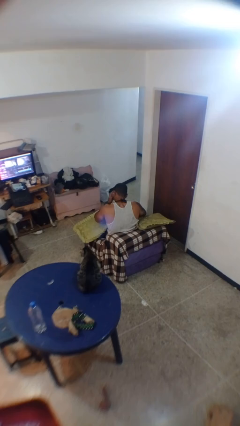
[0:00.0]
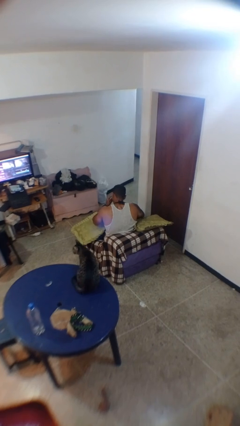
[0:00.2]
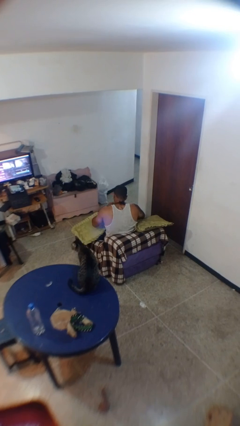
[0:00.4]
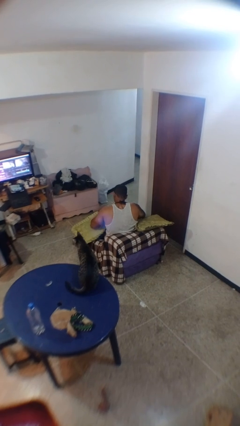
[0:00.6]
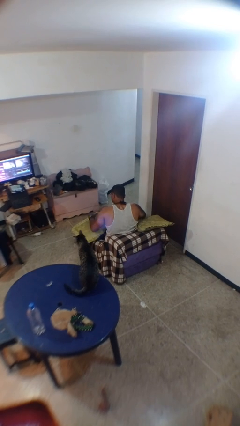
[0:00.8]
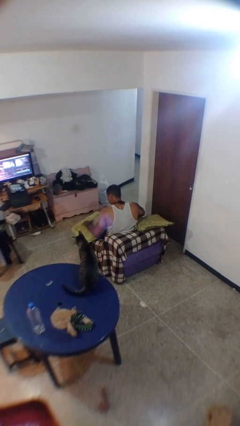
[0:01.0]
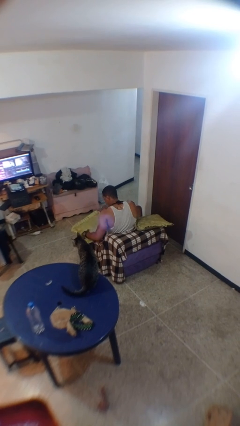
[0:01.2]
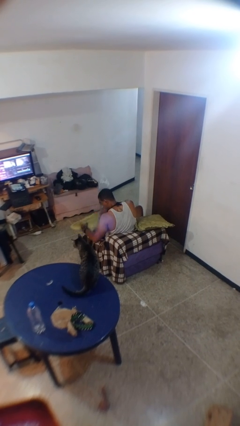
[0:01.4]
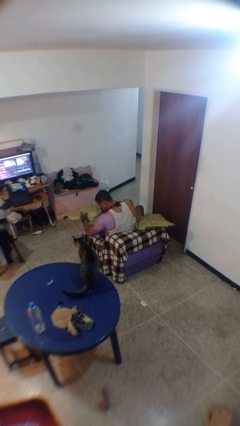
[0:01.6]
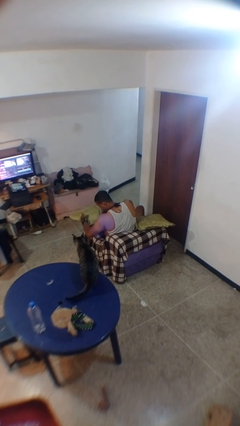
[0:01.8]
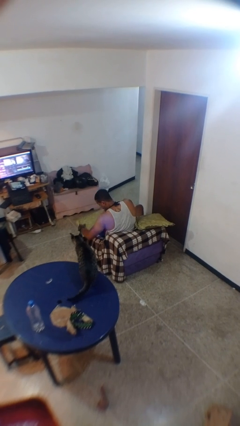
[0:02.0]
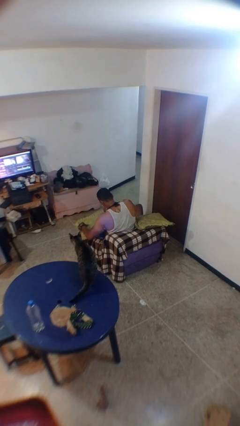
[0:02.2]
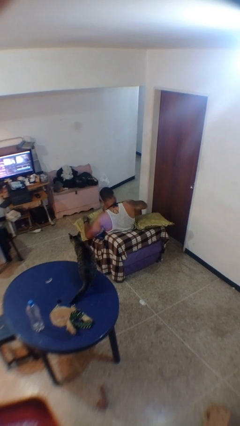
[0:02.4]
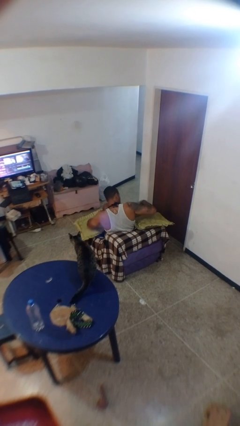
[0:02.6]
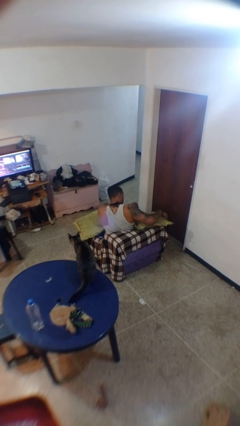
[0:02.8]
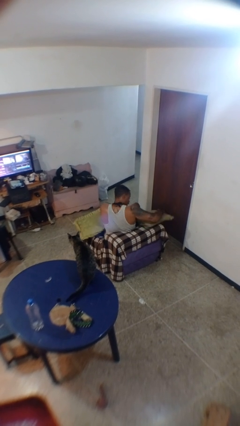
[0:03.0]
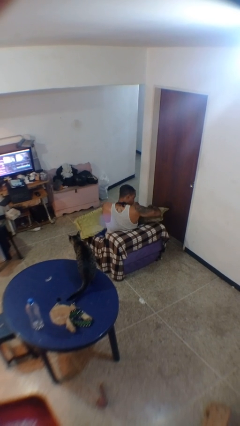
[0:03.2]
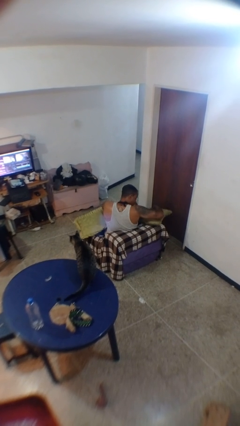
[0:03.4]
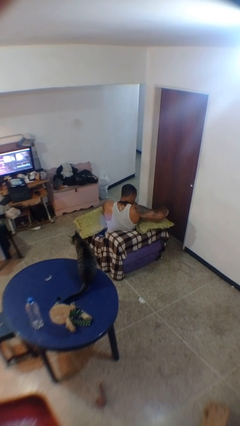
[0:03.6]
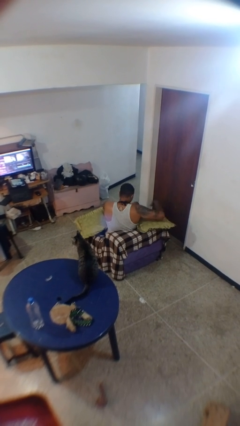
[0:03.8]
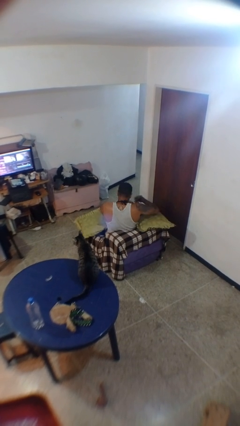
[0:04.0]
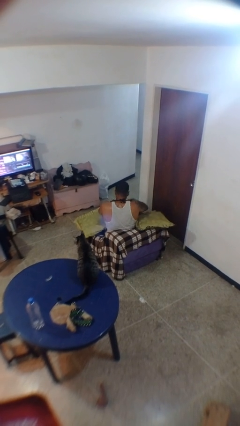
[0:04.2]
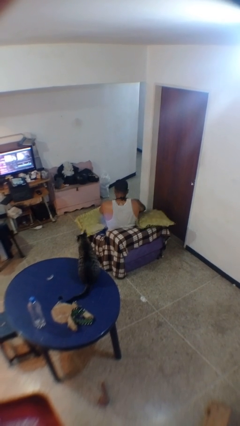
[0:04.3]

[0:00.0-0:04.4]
person searches in couch

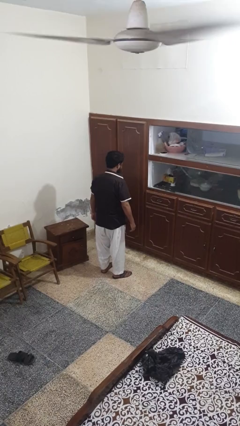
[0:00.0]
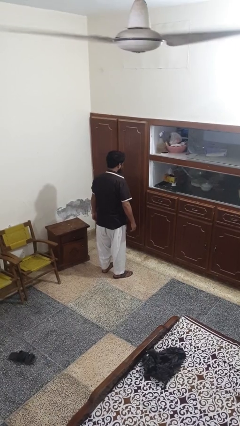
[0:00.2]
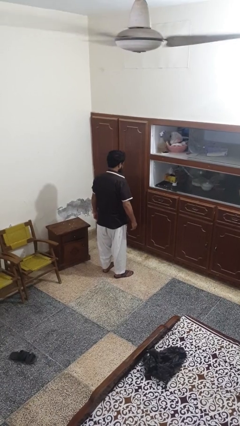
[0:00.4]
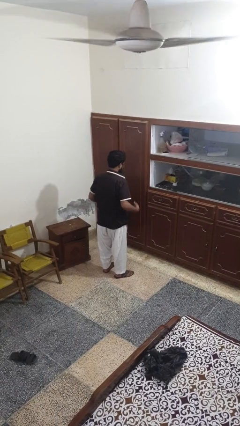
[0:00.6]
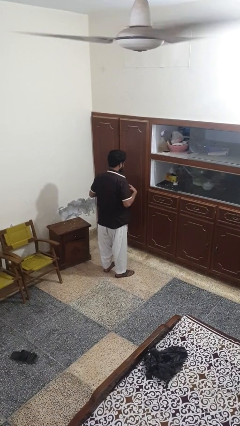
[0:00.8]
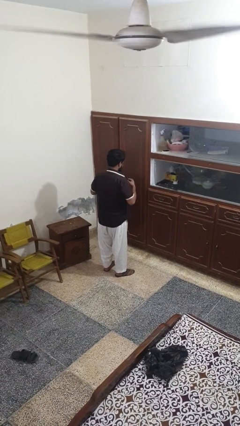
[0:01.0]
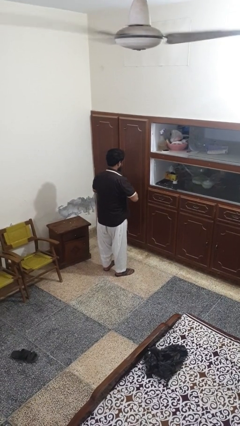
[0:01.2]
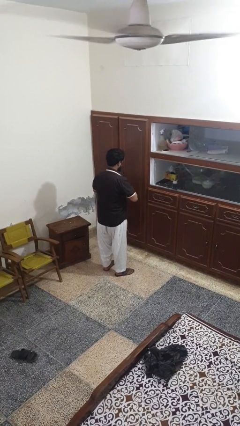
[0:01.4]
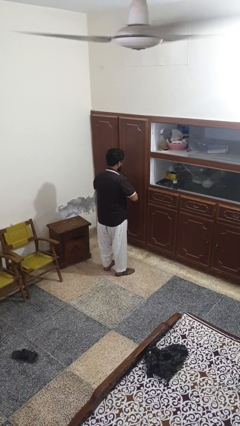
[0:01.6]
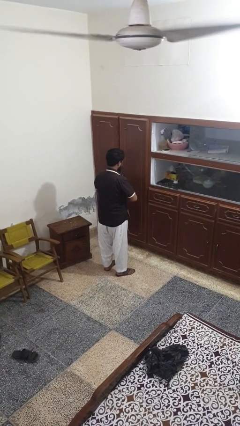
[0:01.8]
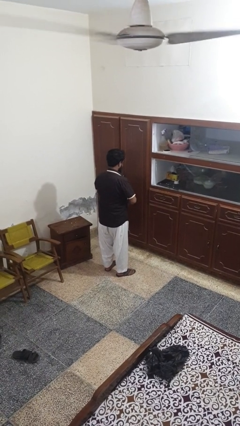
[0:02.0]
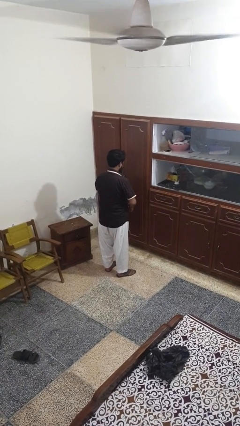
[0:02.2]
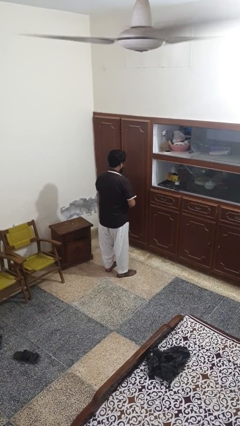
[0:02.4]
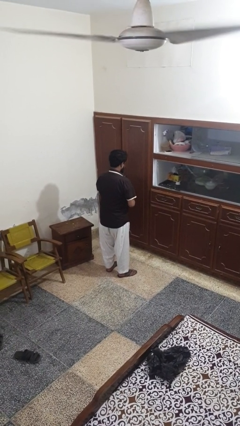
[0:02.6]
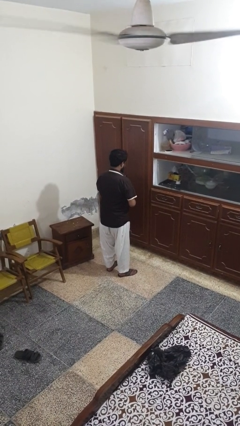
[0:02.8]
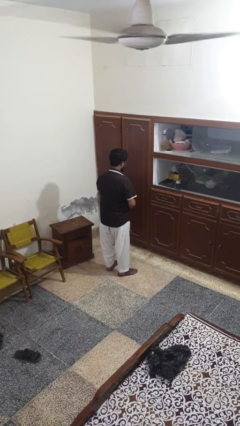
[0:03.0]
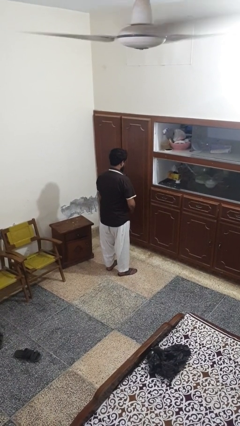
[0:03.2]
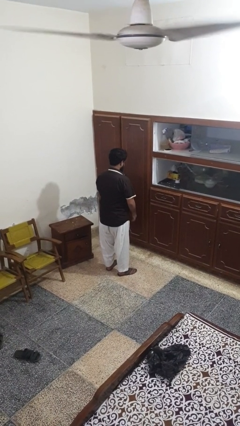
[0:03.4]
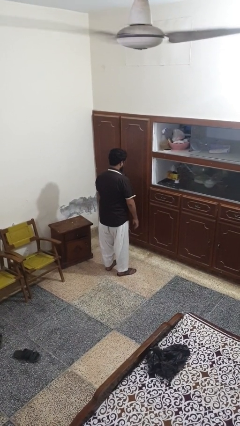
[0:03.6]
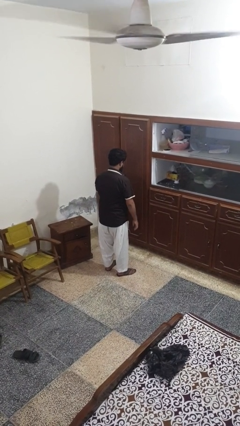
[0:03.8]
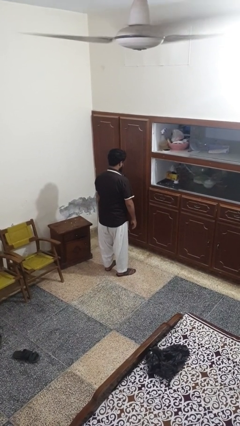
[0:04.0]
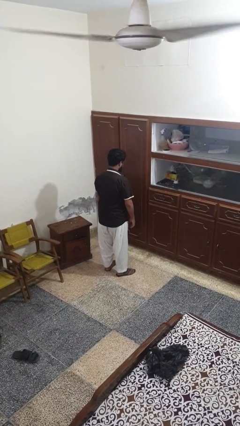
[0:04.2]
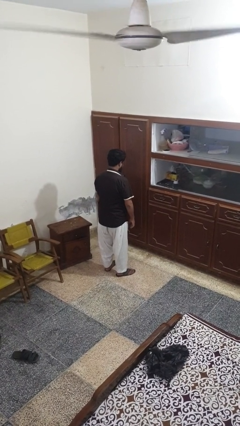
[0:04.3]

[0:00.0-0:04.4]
person buttons shirt

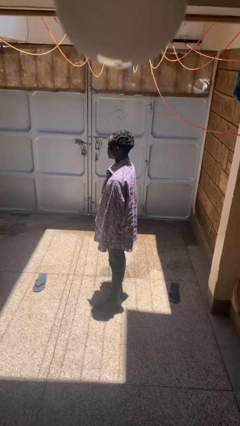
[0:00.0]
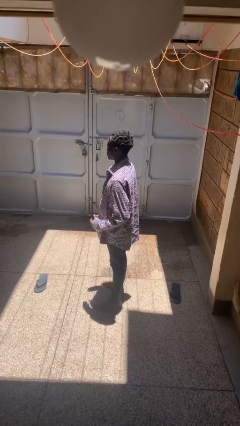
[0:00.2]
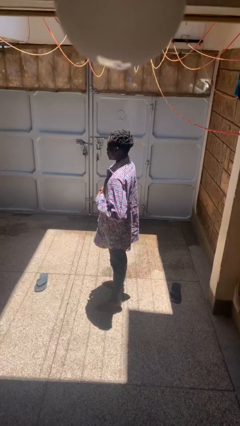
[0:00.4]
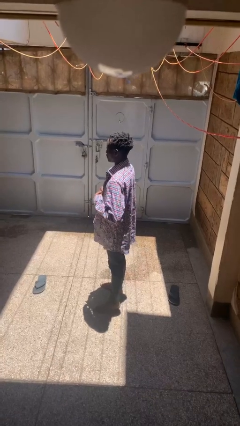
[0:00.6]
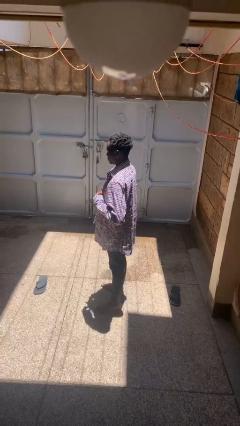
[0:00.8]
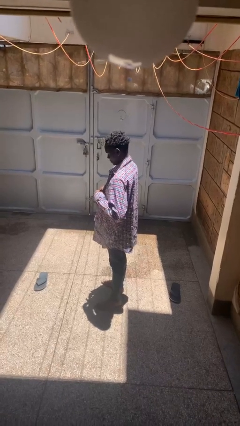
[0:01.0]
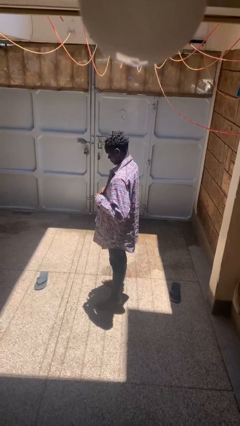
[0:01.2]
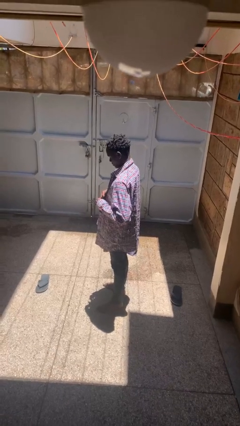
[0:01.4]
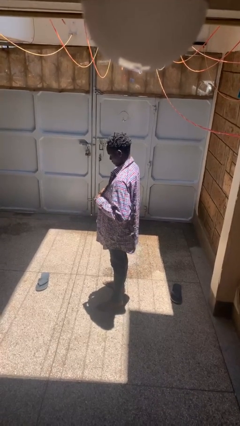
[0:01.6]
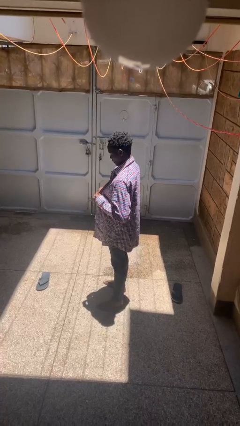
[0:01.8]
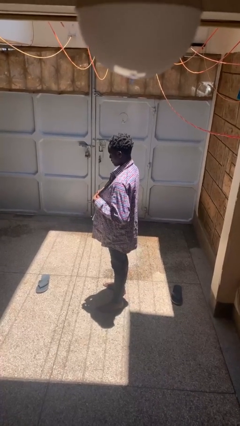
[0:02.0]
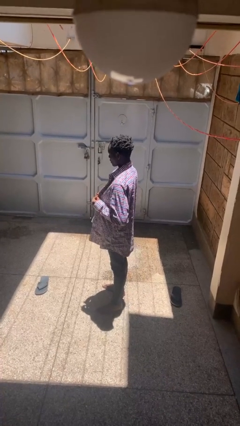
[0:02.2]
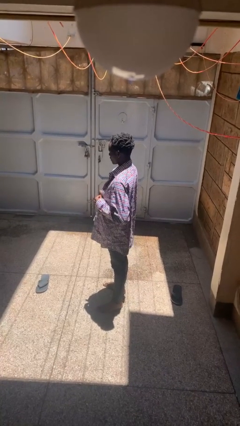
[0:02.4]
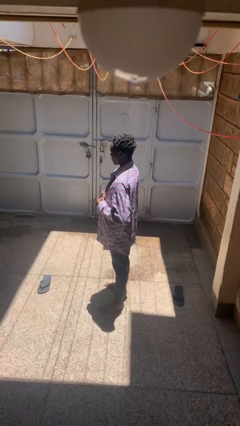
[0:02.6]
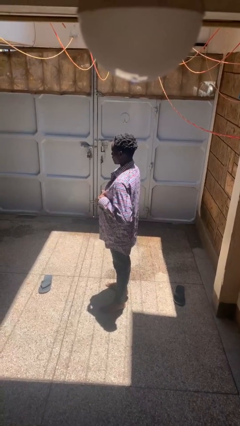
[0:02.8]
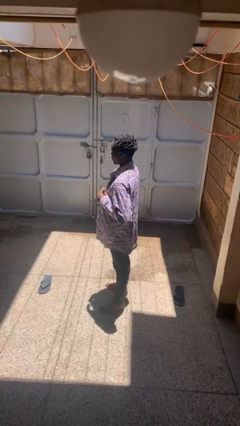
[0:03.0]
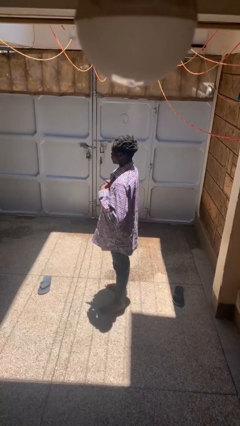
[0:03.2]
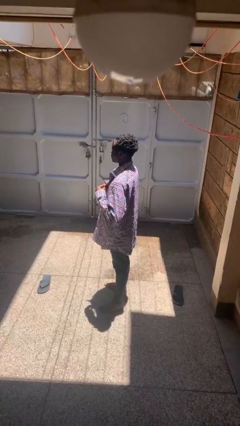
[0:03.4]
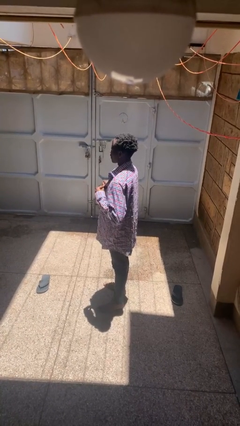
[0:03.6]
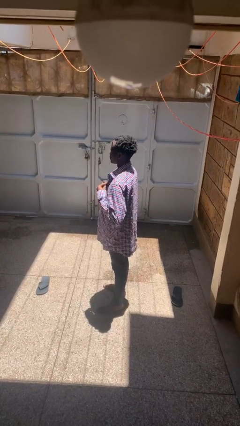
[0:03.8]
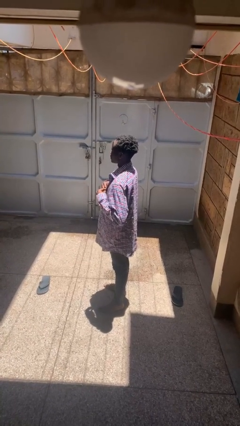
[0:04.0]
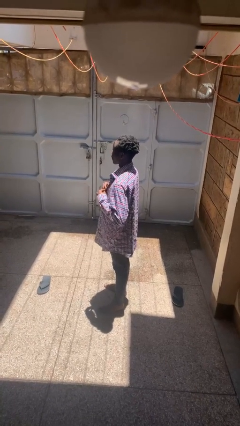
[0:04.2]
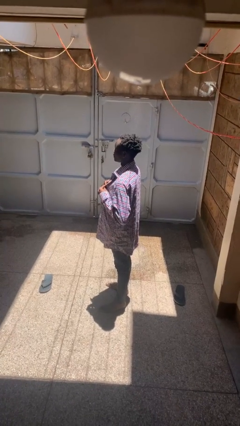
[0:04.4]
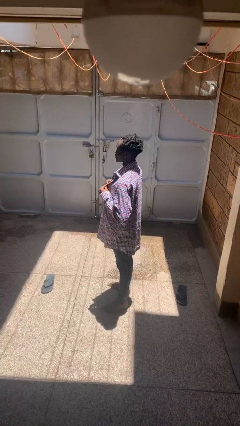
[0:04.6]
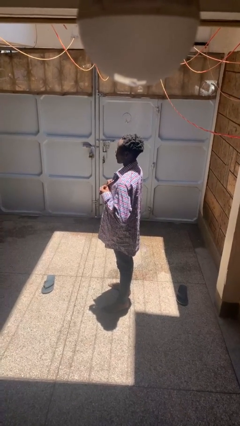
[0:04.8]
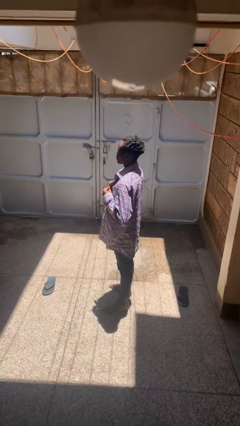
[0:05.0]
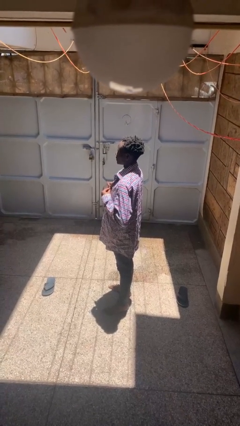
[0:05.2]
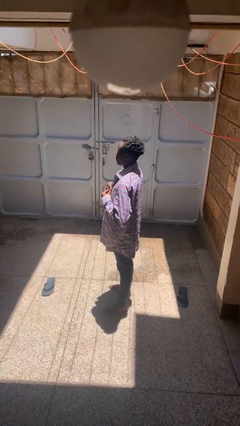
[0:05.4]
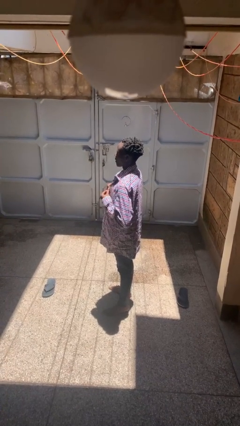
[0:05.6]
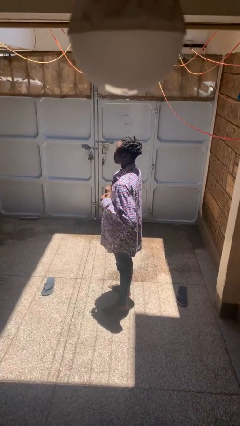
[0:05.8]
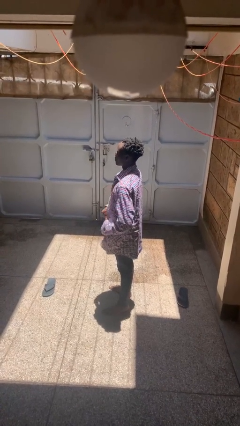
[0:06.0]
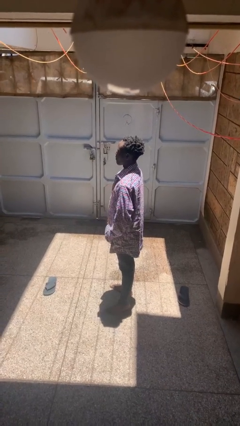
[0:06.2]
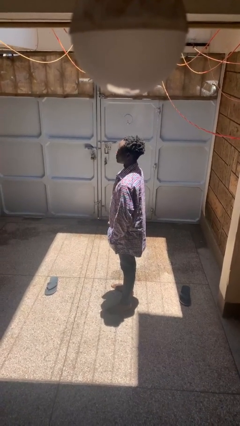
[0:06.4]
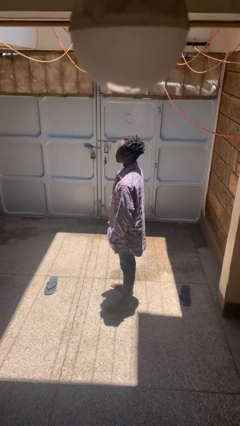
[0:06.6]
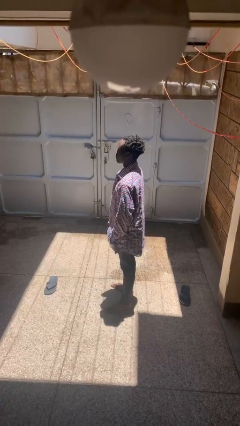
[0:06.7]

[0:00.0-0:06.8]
person unbuttons shirt

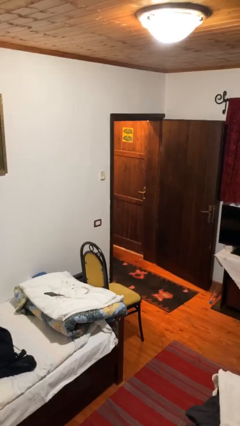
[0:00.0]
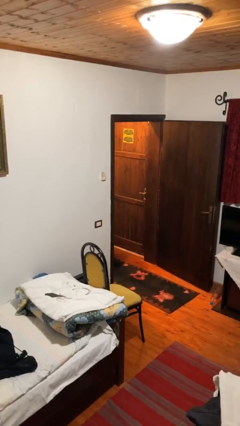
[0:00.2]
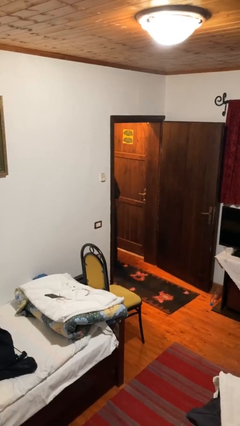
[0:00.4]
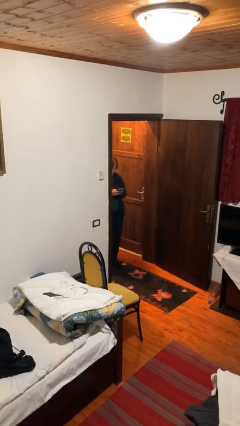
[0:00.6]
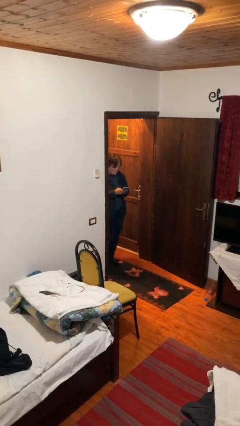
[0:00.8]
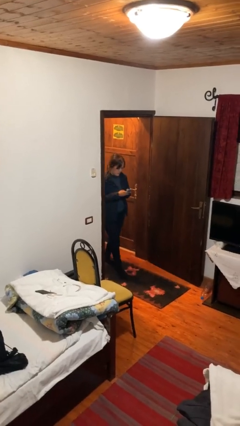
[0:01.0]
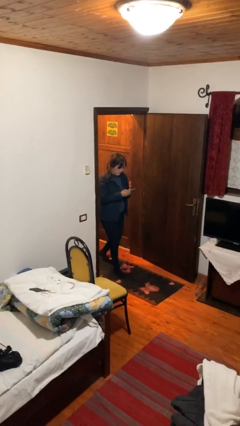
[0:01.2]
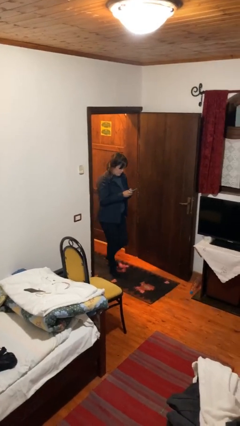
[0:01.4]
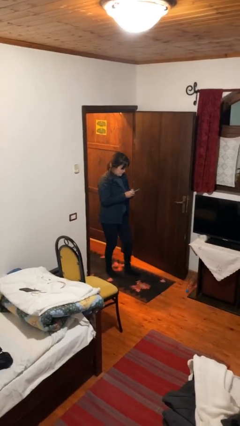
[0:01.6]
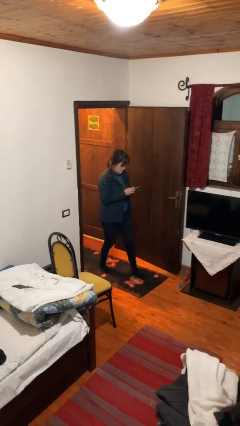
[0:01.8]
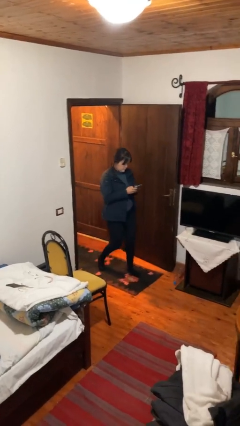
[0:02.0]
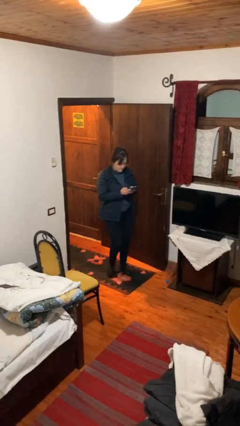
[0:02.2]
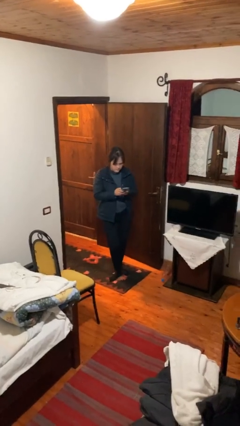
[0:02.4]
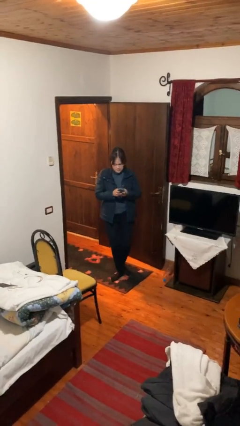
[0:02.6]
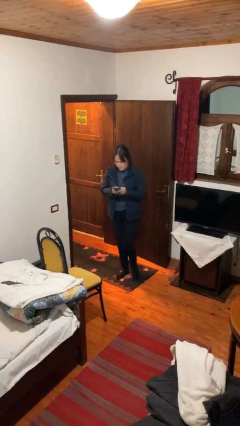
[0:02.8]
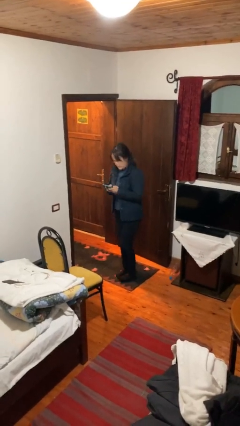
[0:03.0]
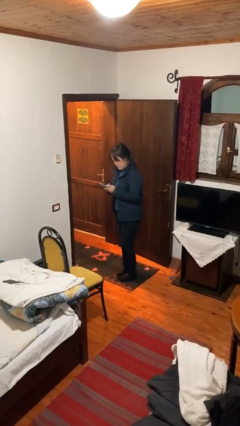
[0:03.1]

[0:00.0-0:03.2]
person enters scene through structure
